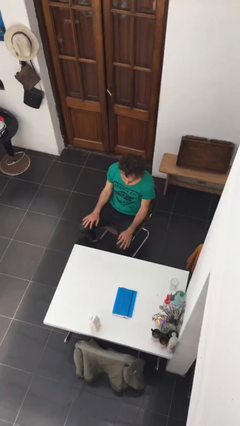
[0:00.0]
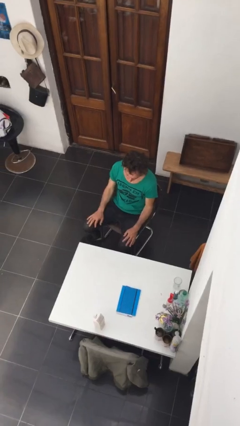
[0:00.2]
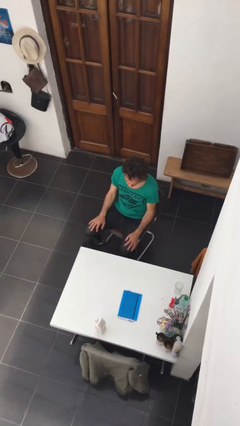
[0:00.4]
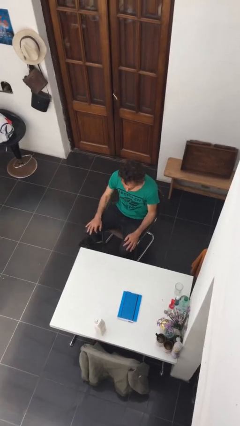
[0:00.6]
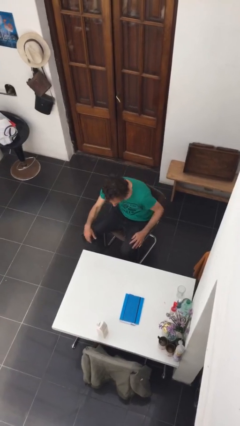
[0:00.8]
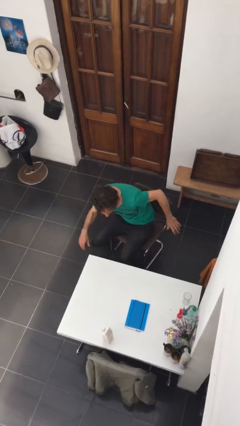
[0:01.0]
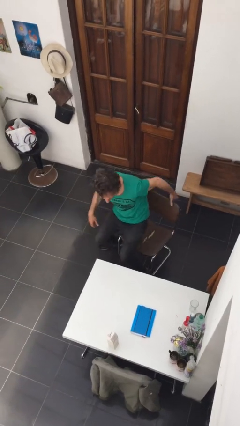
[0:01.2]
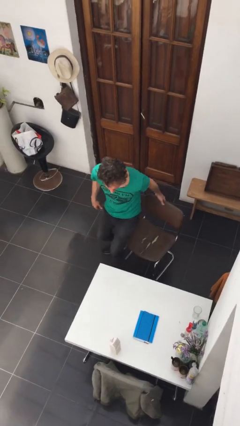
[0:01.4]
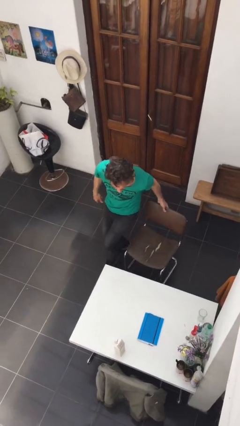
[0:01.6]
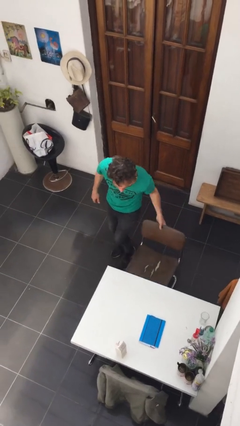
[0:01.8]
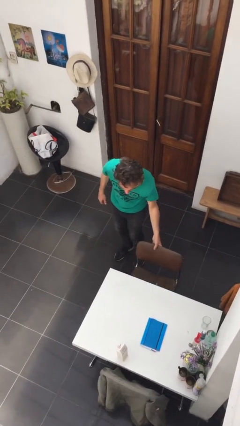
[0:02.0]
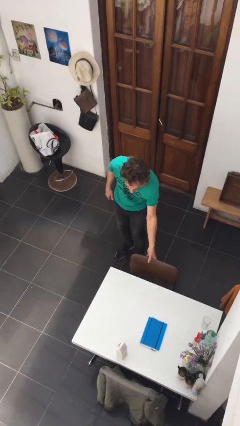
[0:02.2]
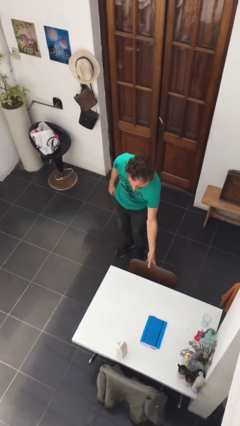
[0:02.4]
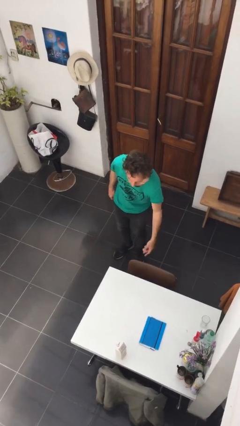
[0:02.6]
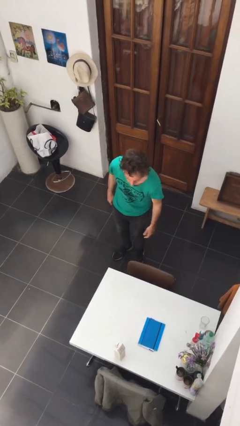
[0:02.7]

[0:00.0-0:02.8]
person stands up

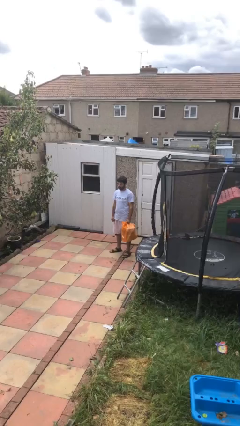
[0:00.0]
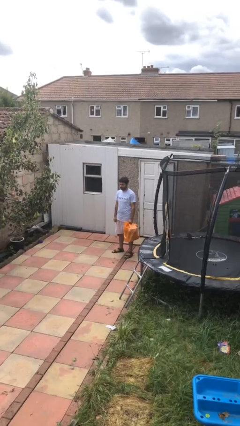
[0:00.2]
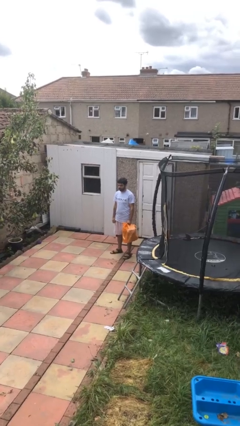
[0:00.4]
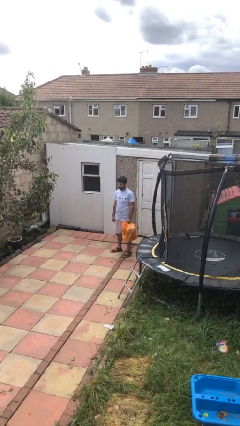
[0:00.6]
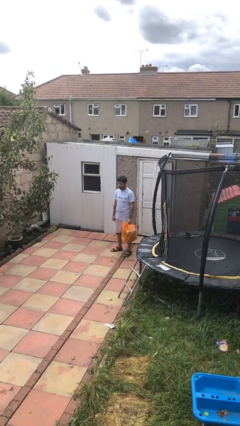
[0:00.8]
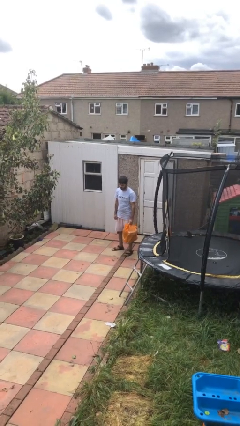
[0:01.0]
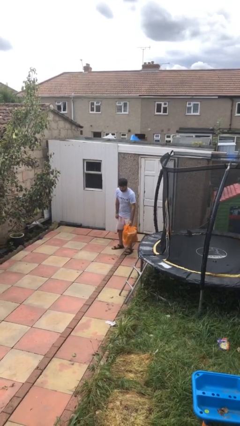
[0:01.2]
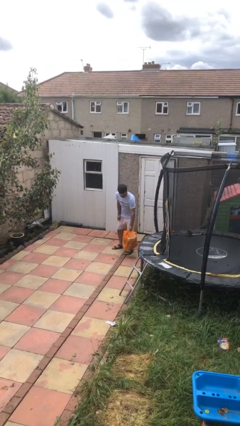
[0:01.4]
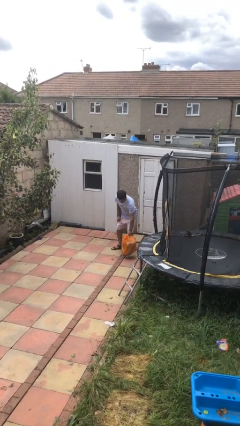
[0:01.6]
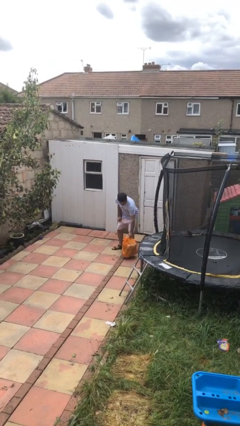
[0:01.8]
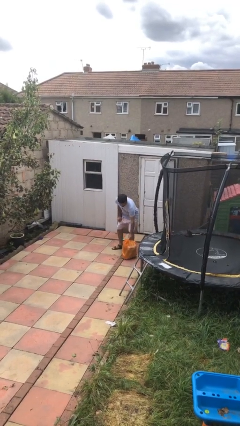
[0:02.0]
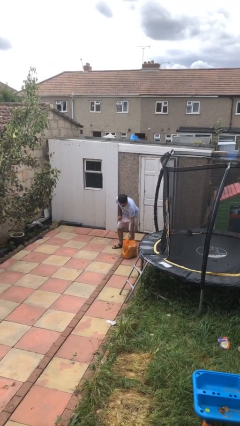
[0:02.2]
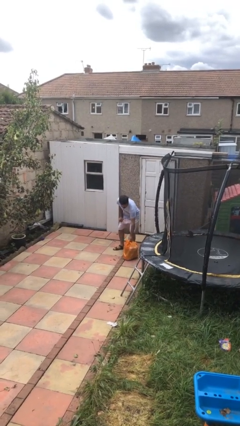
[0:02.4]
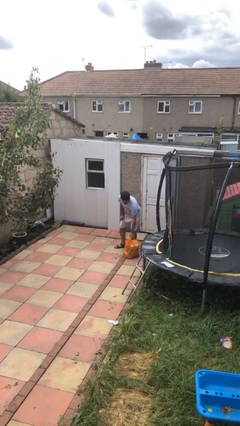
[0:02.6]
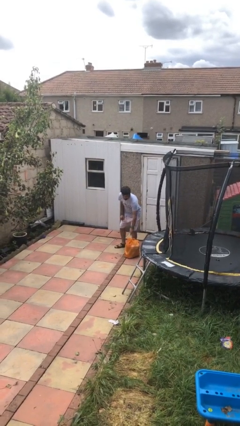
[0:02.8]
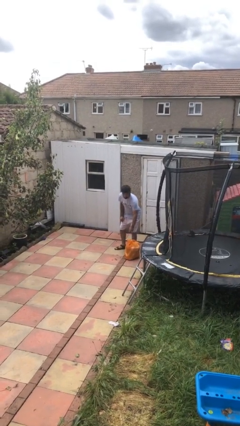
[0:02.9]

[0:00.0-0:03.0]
person puts down object on floor

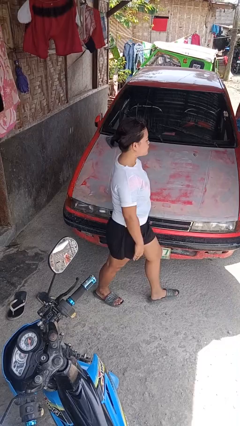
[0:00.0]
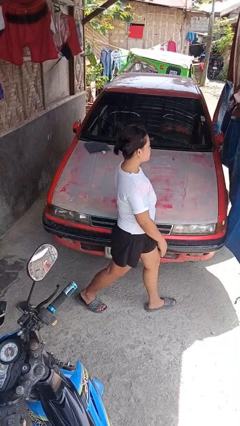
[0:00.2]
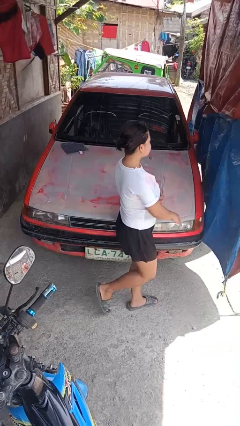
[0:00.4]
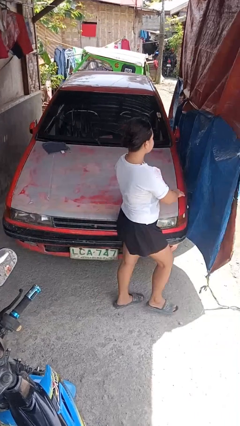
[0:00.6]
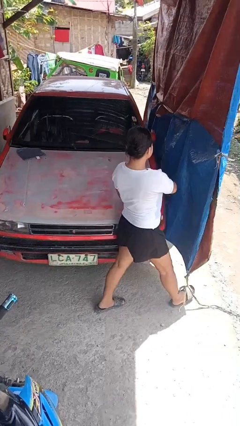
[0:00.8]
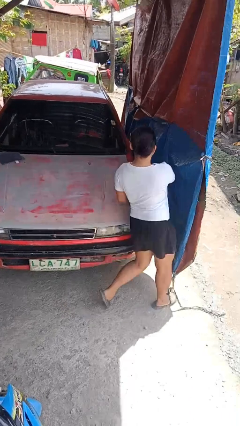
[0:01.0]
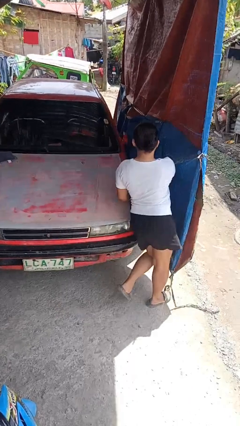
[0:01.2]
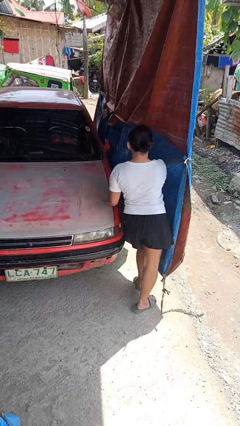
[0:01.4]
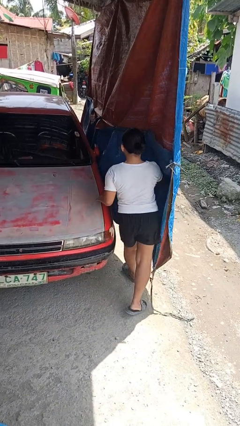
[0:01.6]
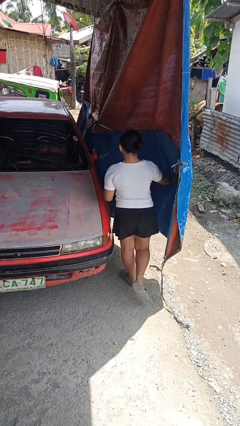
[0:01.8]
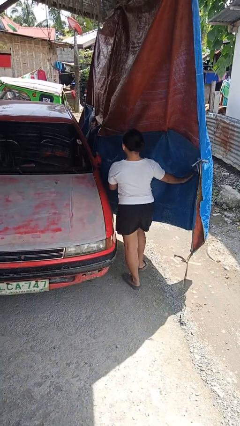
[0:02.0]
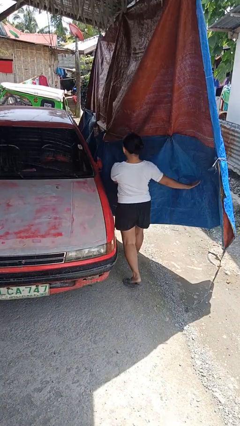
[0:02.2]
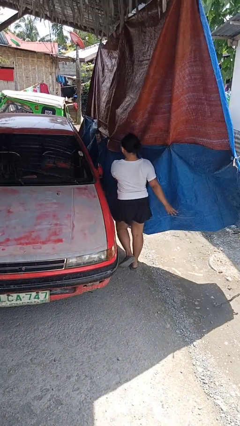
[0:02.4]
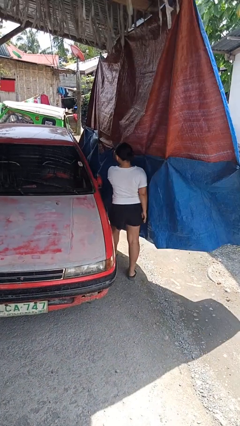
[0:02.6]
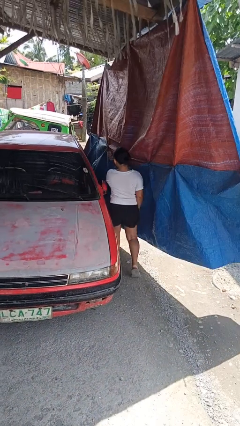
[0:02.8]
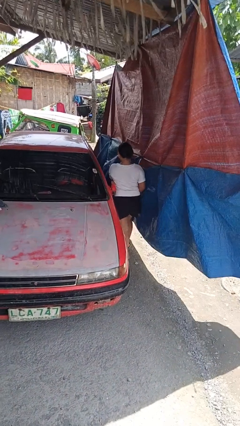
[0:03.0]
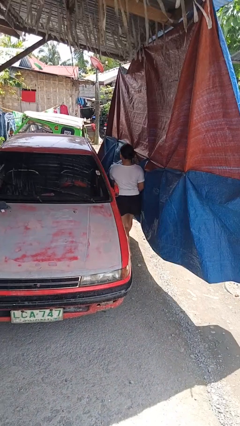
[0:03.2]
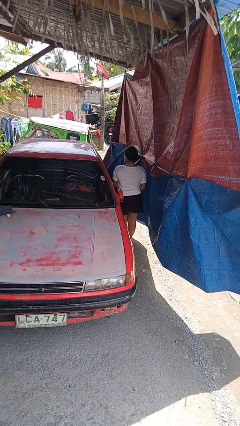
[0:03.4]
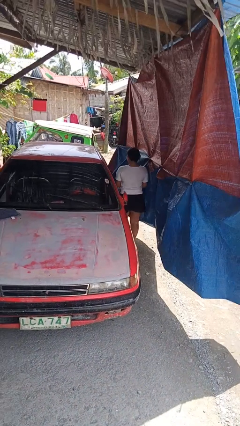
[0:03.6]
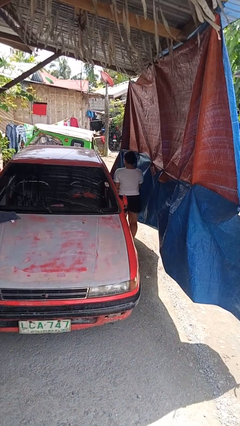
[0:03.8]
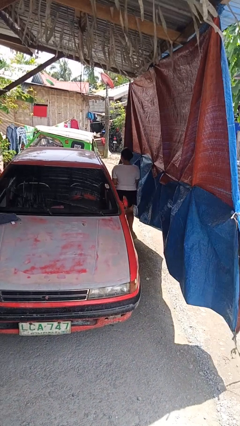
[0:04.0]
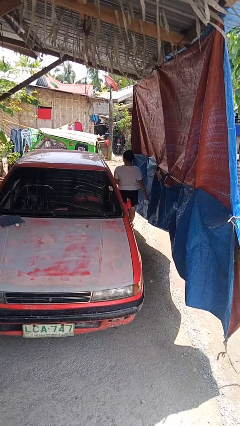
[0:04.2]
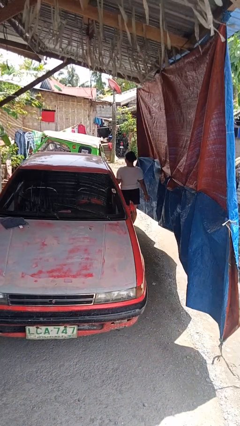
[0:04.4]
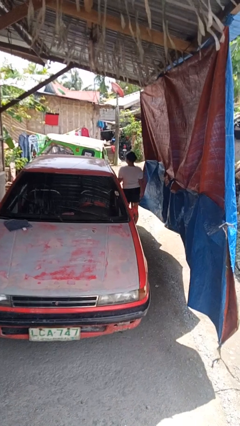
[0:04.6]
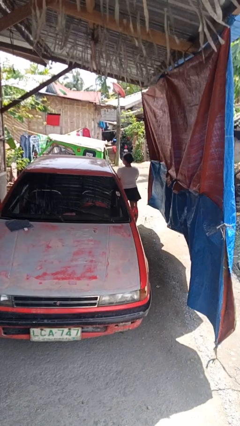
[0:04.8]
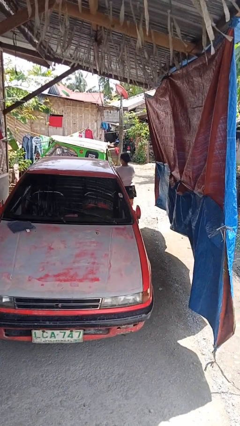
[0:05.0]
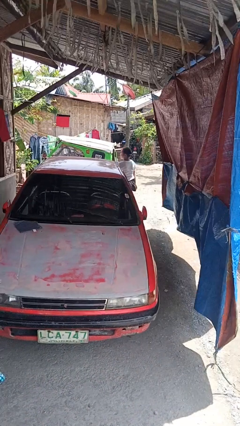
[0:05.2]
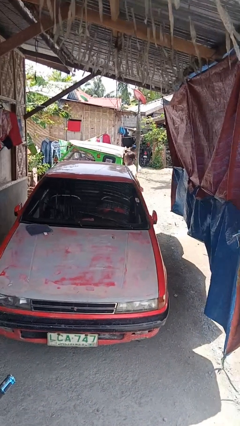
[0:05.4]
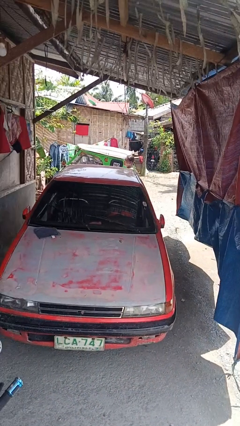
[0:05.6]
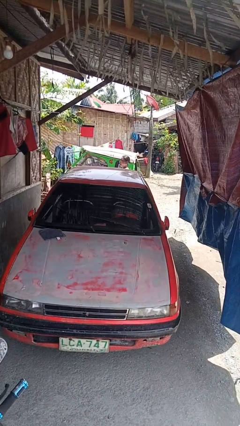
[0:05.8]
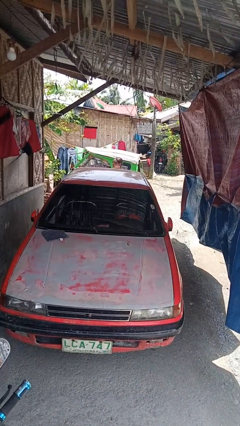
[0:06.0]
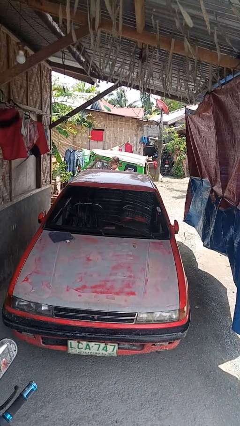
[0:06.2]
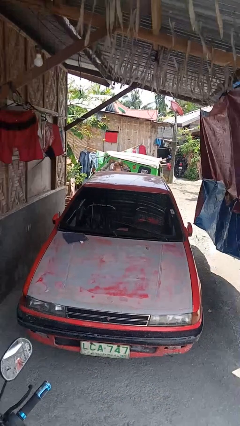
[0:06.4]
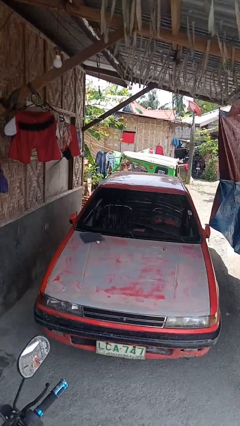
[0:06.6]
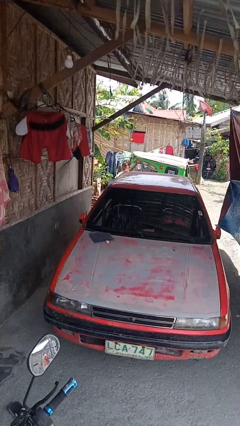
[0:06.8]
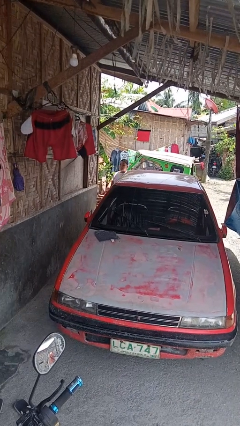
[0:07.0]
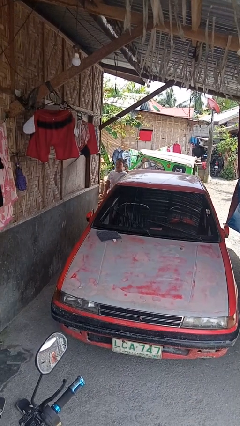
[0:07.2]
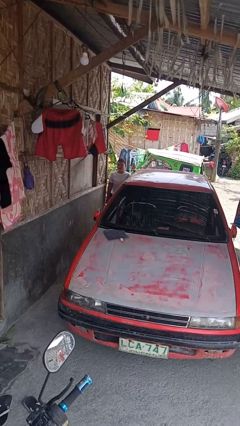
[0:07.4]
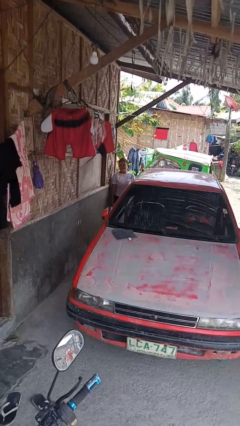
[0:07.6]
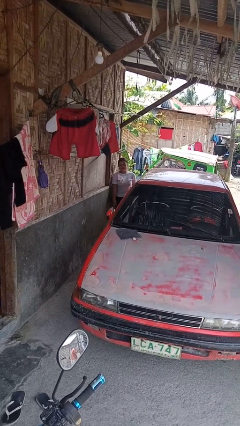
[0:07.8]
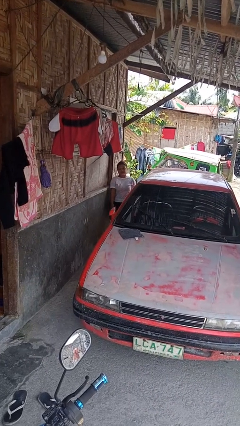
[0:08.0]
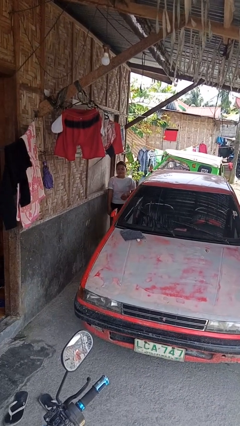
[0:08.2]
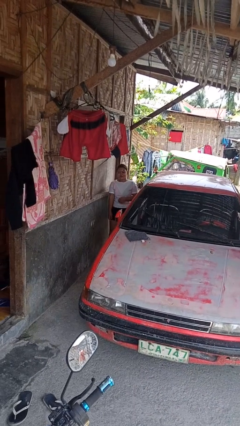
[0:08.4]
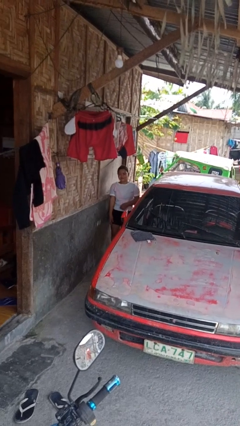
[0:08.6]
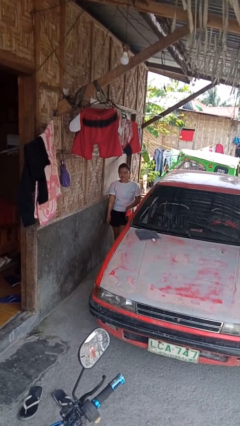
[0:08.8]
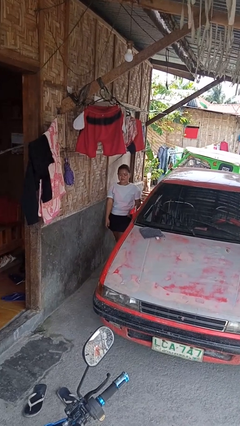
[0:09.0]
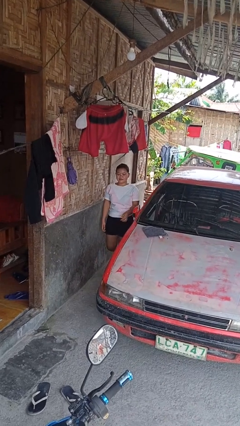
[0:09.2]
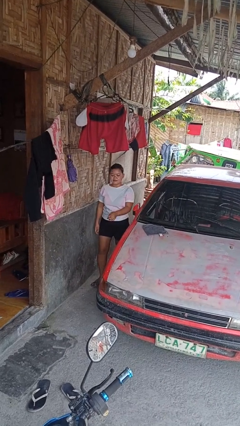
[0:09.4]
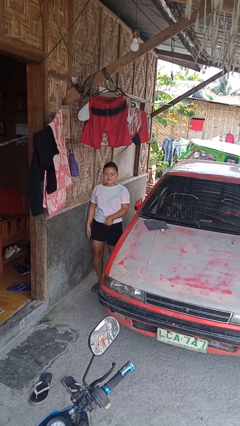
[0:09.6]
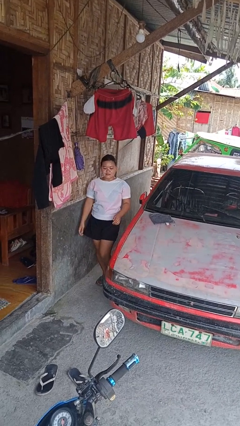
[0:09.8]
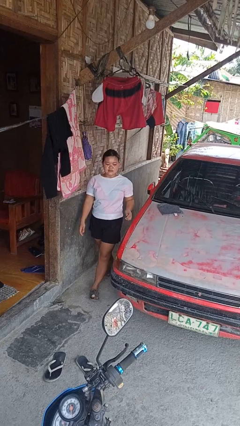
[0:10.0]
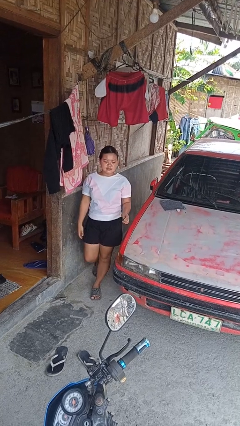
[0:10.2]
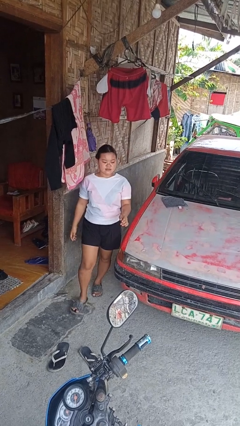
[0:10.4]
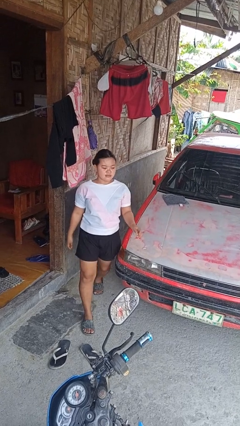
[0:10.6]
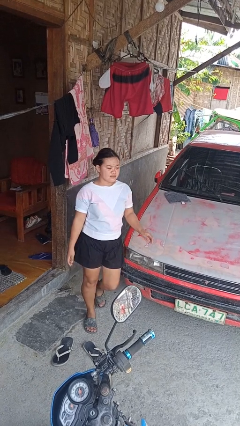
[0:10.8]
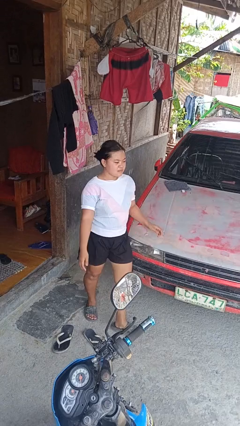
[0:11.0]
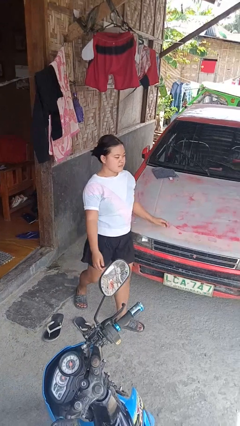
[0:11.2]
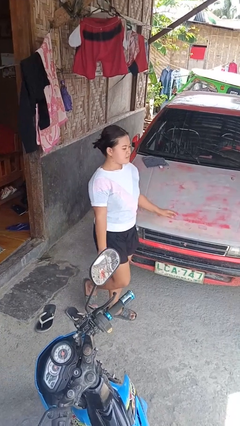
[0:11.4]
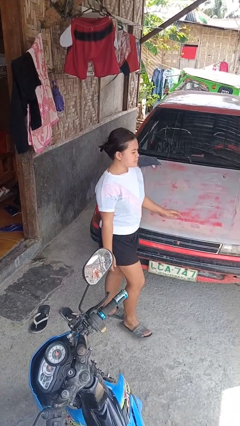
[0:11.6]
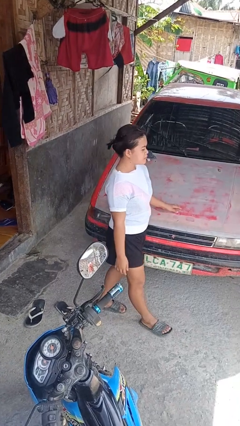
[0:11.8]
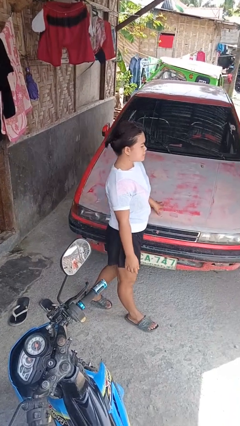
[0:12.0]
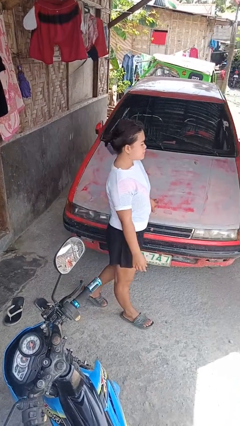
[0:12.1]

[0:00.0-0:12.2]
person walks around car
